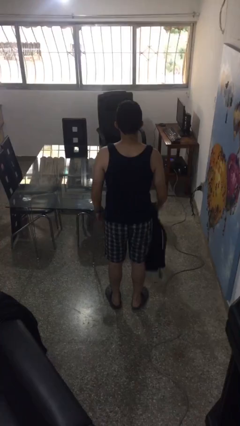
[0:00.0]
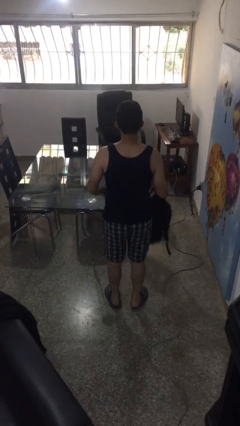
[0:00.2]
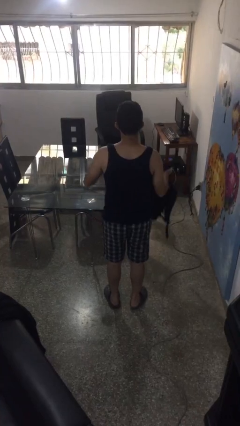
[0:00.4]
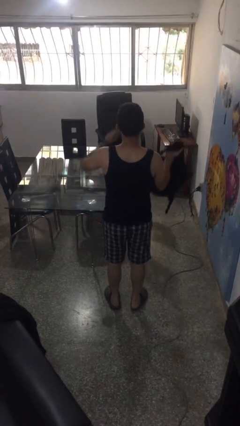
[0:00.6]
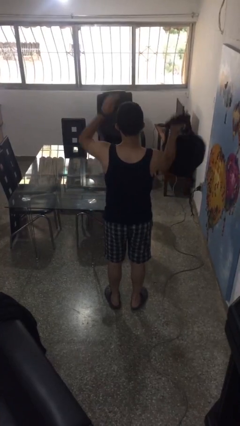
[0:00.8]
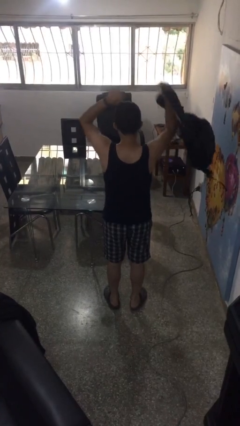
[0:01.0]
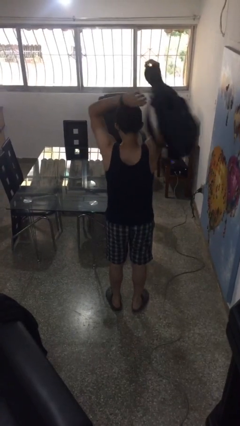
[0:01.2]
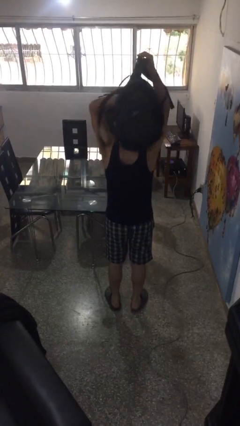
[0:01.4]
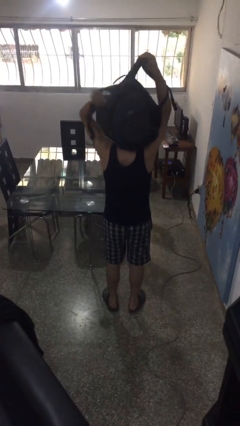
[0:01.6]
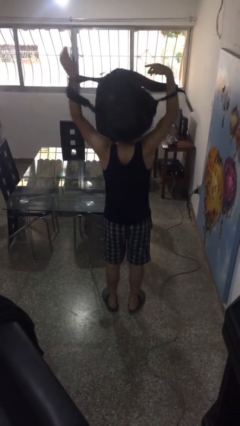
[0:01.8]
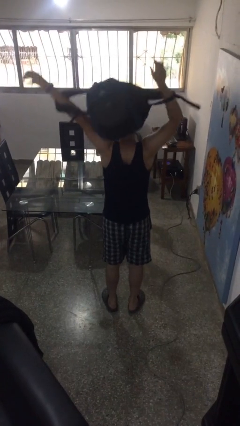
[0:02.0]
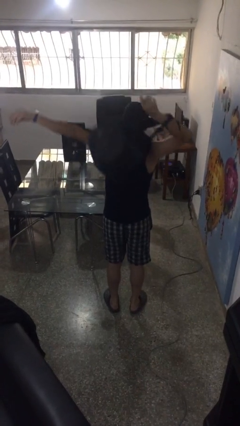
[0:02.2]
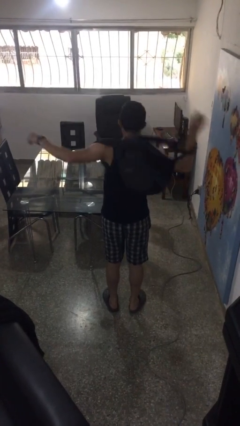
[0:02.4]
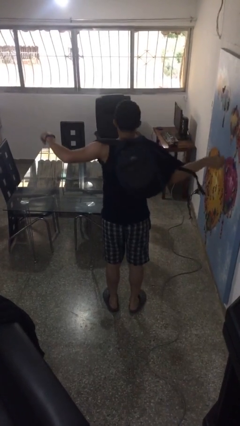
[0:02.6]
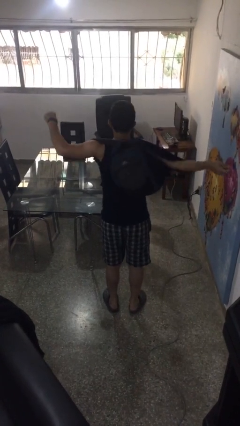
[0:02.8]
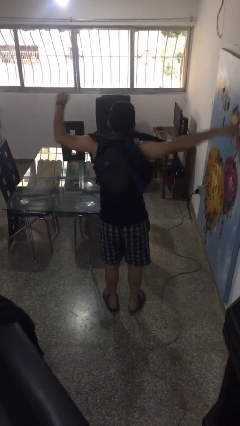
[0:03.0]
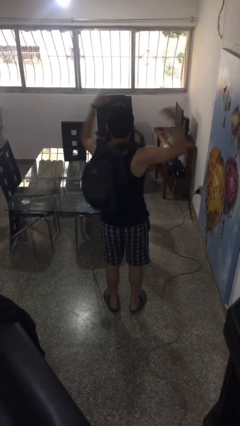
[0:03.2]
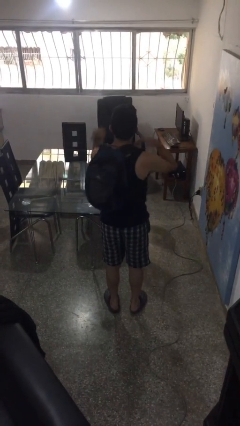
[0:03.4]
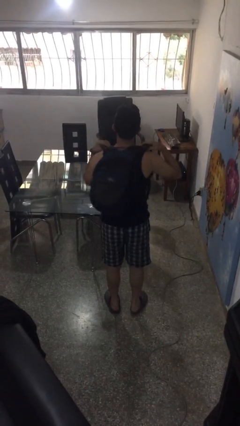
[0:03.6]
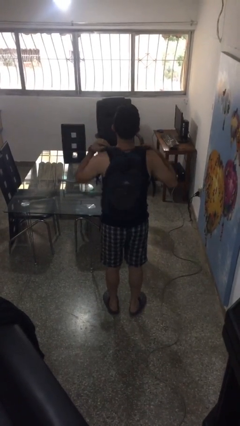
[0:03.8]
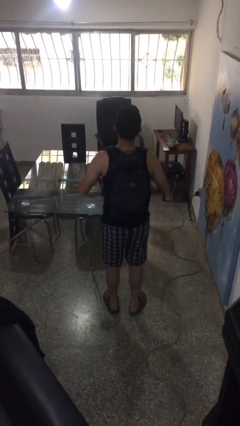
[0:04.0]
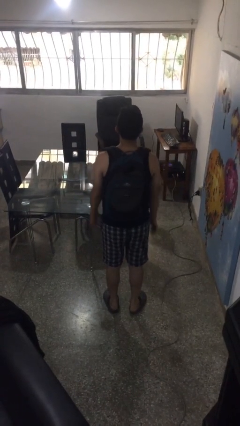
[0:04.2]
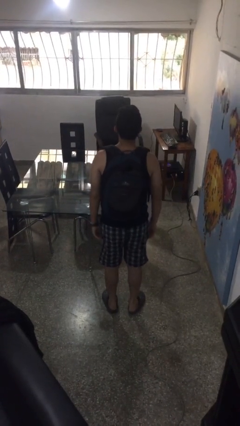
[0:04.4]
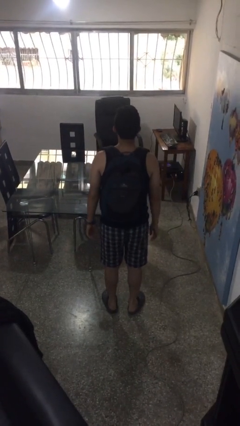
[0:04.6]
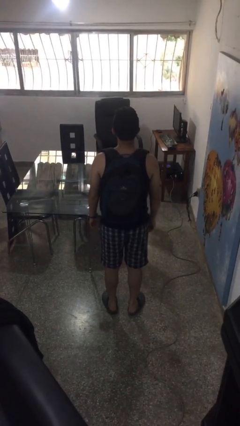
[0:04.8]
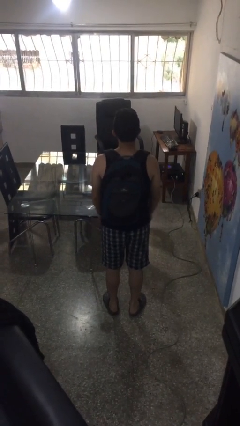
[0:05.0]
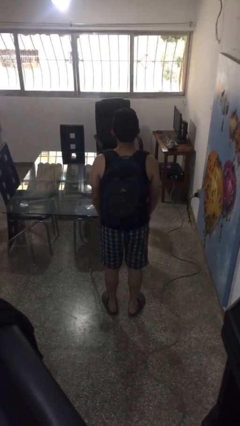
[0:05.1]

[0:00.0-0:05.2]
person puts on backpack

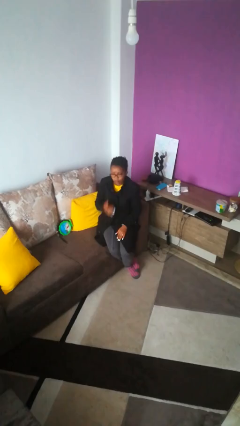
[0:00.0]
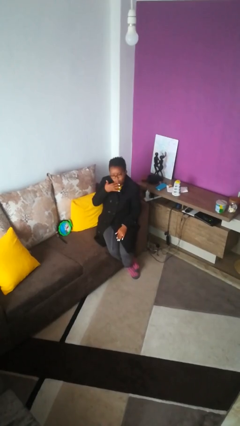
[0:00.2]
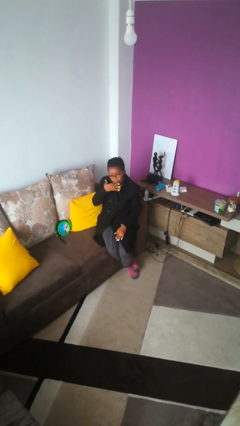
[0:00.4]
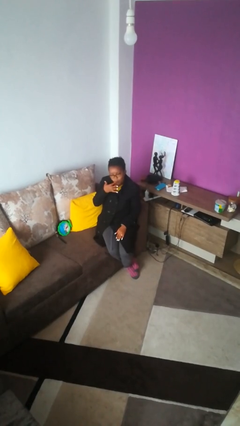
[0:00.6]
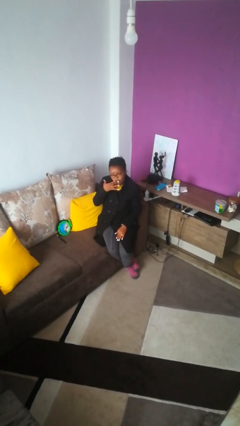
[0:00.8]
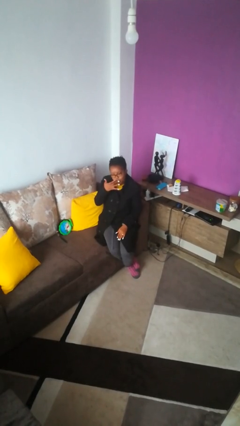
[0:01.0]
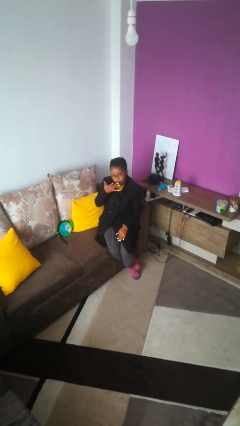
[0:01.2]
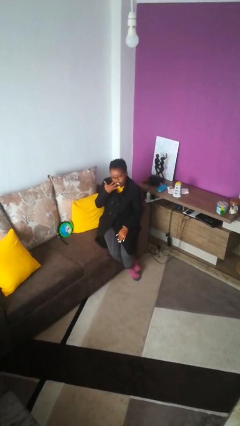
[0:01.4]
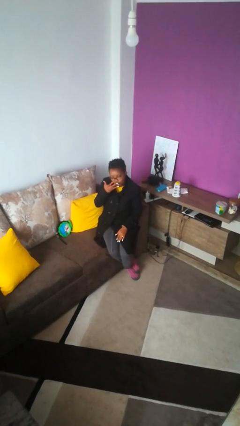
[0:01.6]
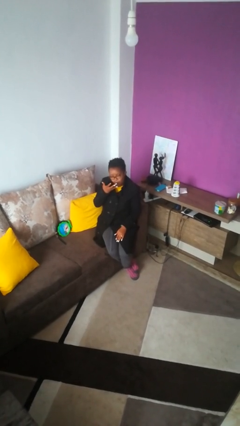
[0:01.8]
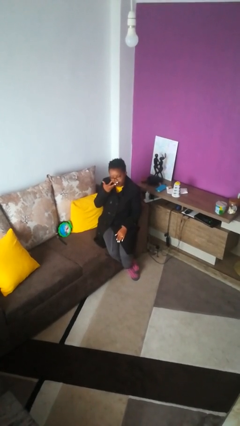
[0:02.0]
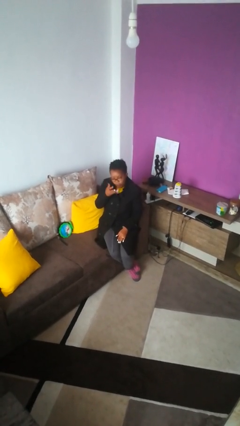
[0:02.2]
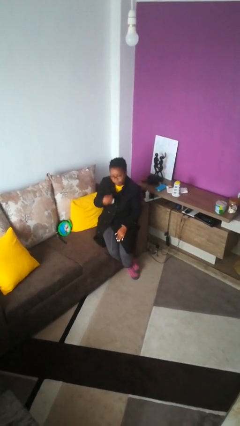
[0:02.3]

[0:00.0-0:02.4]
person licks fingers

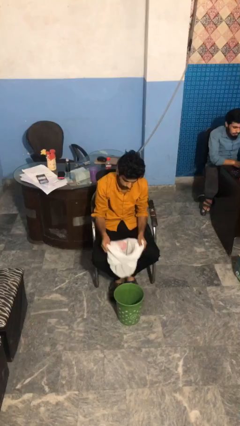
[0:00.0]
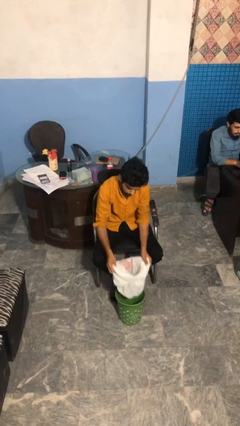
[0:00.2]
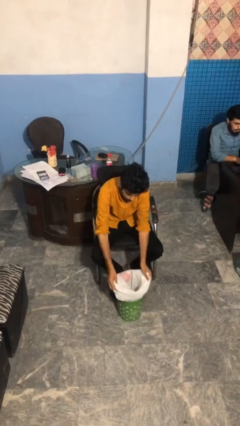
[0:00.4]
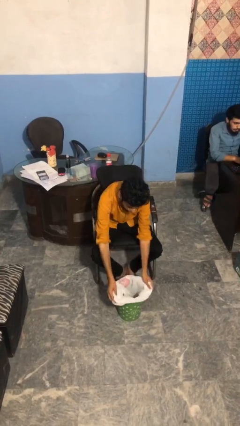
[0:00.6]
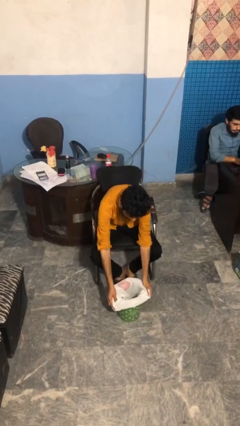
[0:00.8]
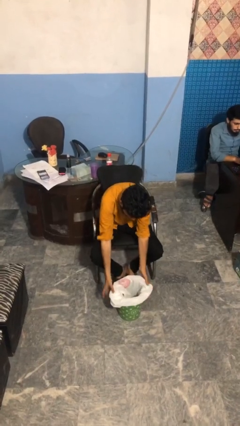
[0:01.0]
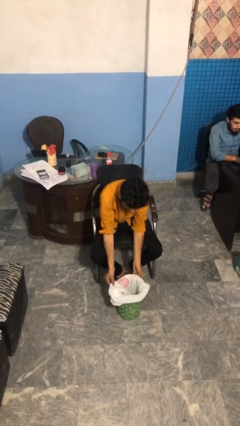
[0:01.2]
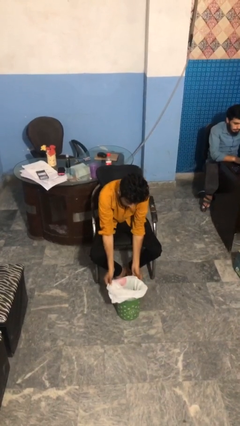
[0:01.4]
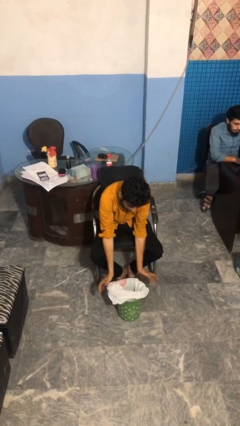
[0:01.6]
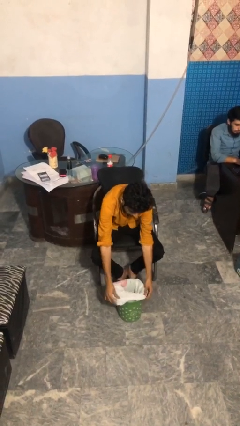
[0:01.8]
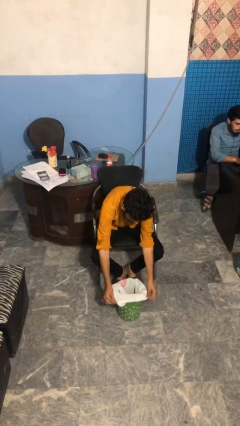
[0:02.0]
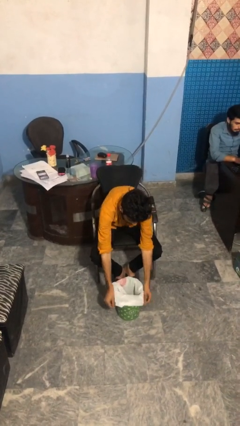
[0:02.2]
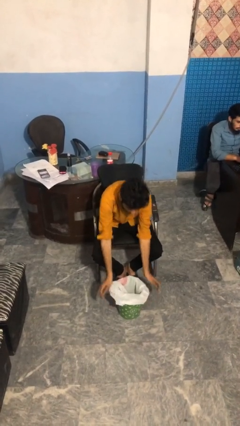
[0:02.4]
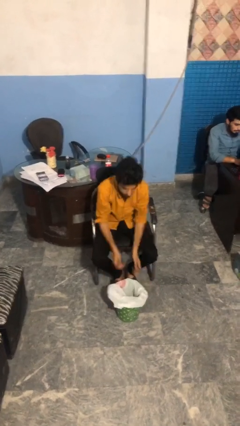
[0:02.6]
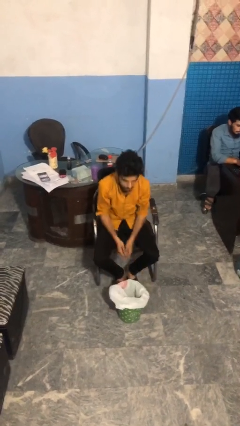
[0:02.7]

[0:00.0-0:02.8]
person inserts trashbag into trashcan

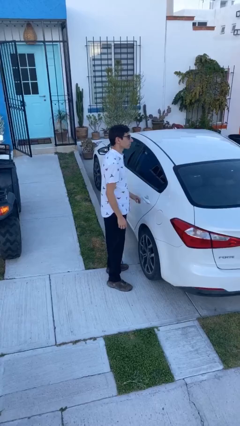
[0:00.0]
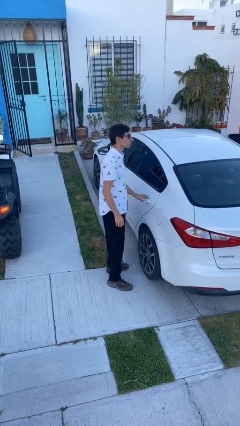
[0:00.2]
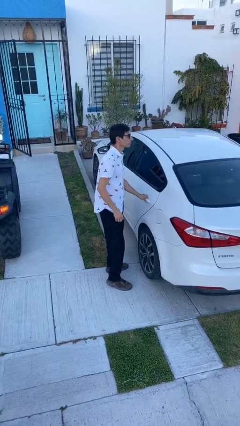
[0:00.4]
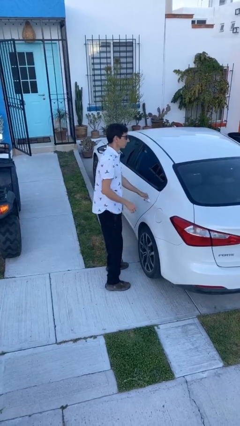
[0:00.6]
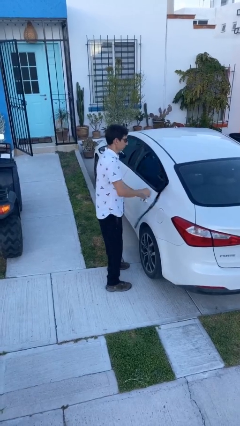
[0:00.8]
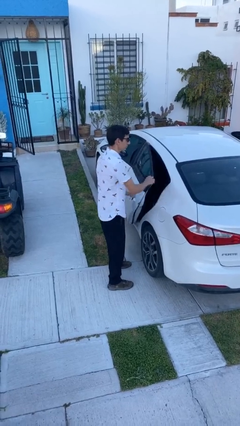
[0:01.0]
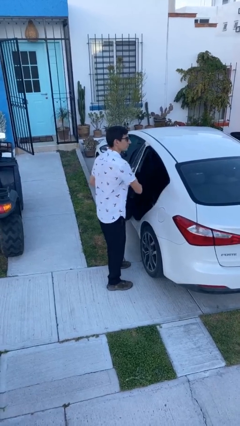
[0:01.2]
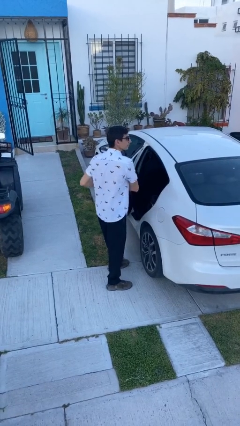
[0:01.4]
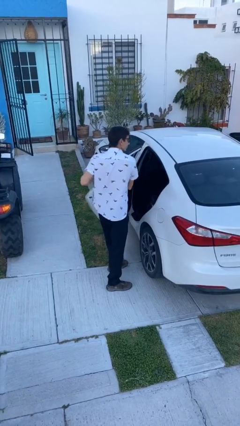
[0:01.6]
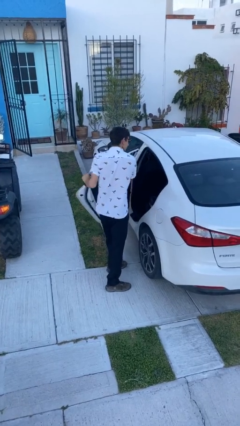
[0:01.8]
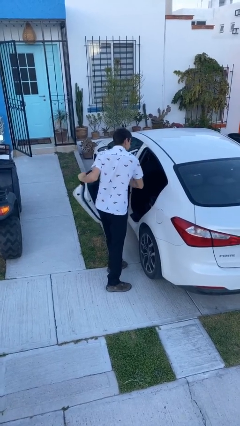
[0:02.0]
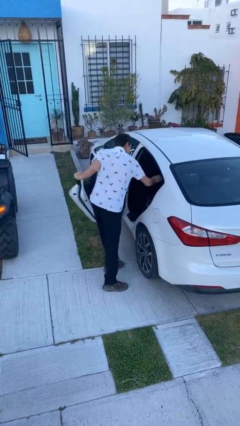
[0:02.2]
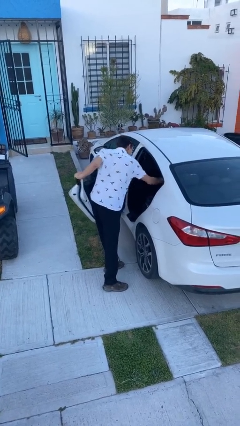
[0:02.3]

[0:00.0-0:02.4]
person opens car door

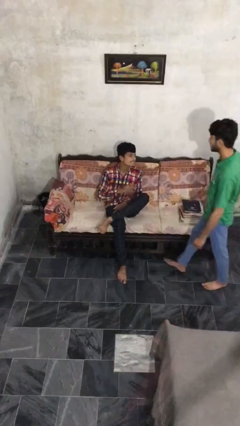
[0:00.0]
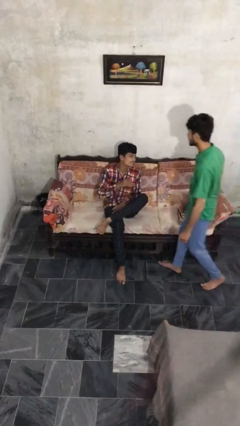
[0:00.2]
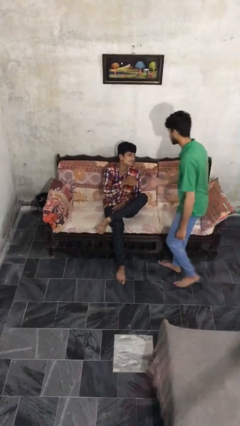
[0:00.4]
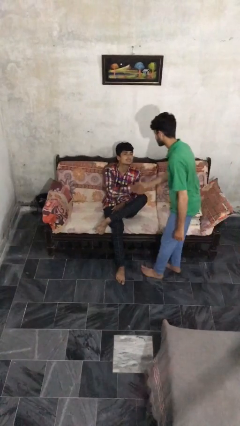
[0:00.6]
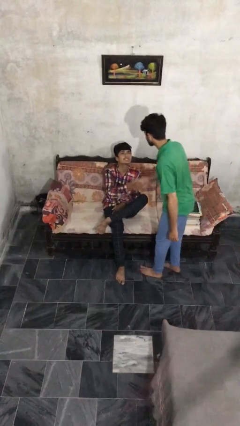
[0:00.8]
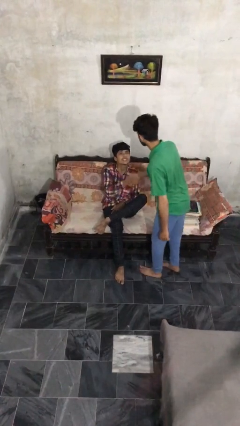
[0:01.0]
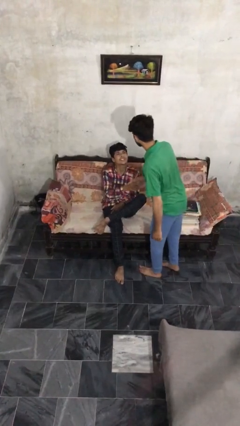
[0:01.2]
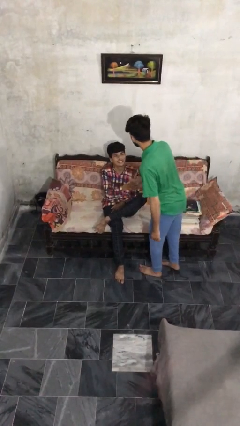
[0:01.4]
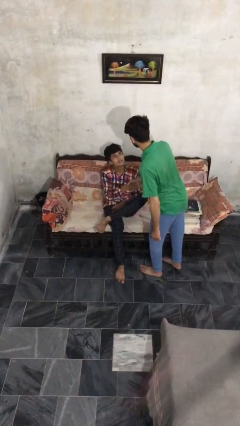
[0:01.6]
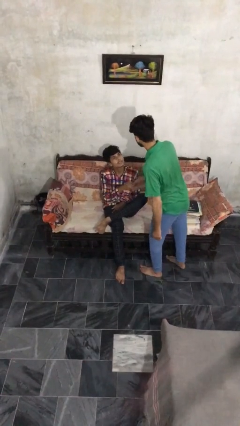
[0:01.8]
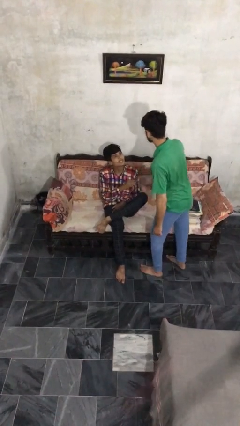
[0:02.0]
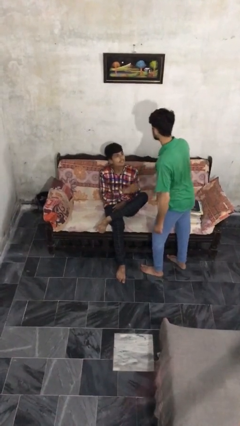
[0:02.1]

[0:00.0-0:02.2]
person shakes hand

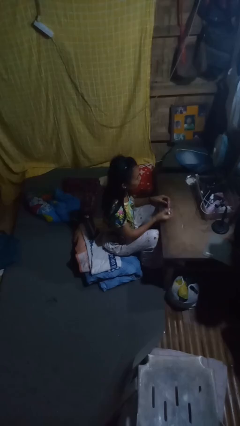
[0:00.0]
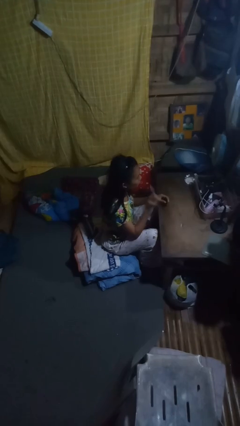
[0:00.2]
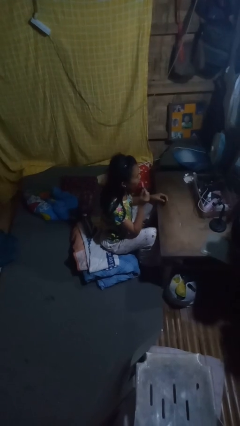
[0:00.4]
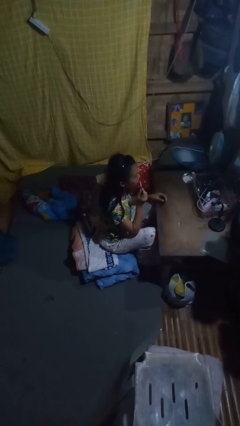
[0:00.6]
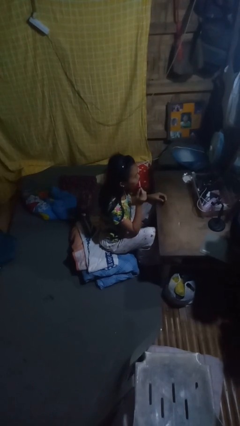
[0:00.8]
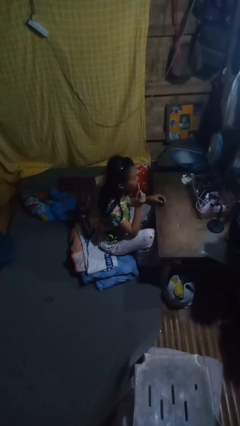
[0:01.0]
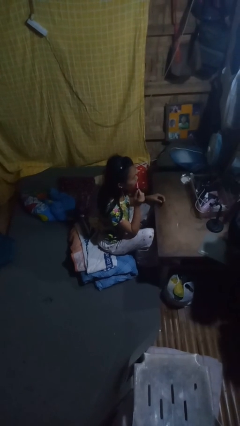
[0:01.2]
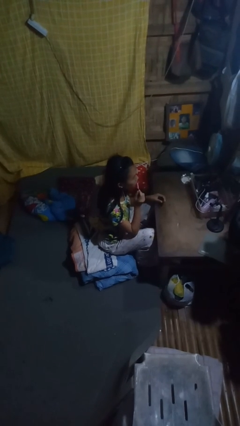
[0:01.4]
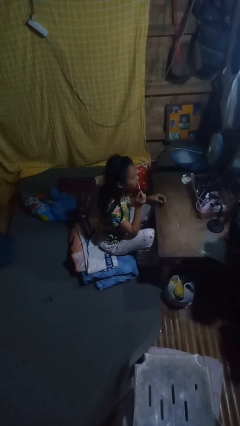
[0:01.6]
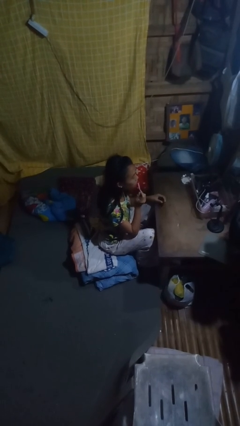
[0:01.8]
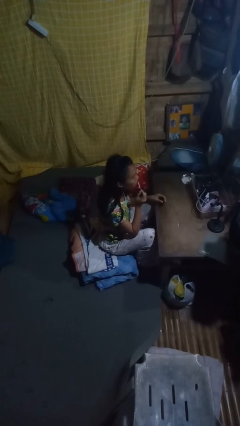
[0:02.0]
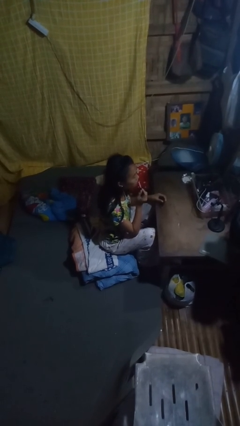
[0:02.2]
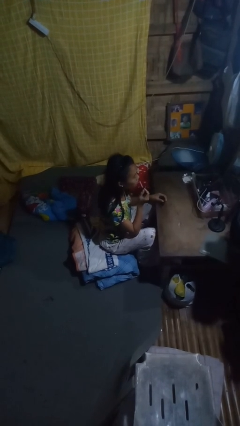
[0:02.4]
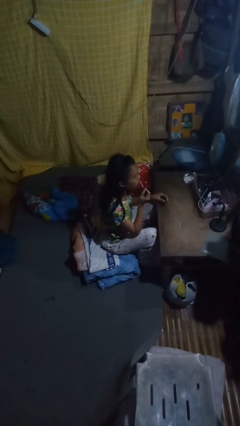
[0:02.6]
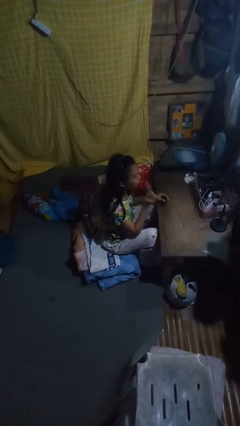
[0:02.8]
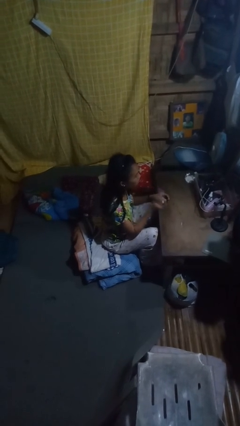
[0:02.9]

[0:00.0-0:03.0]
person applies lip makeup
